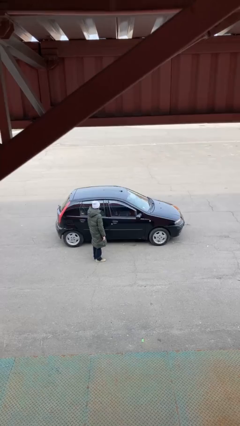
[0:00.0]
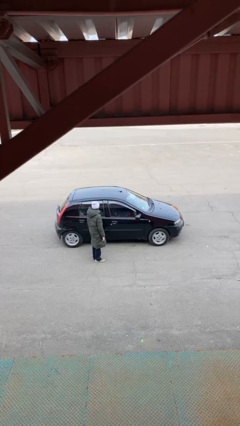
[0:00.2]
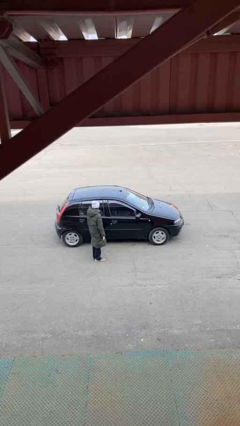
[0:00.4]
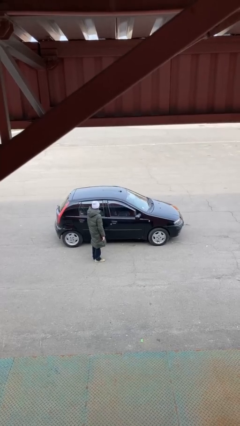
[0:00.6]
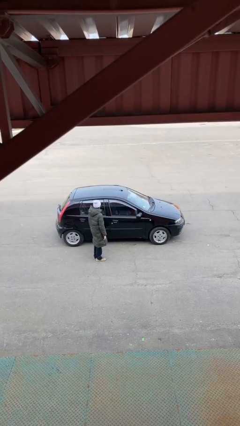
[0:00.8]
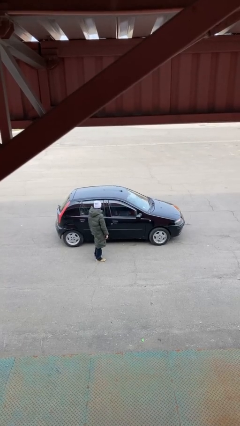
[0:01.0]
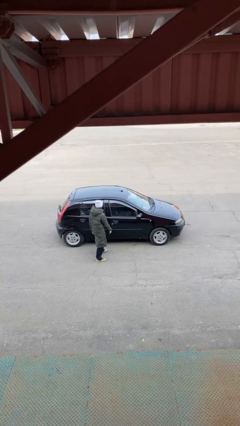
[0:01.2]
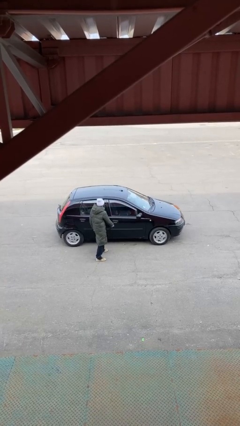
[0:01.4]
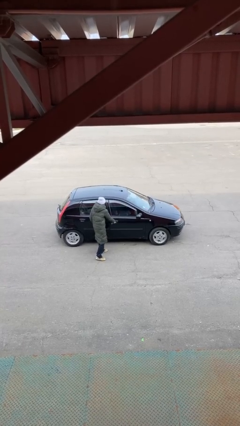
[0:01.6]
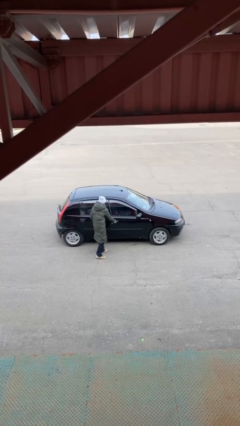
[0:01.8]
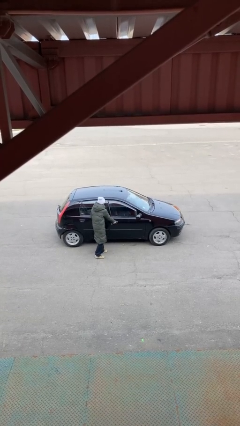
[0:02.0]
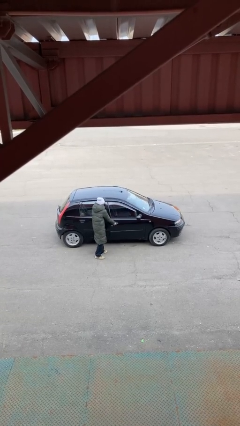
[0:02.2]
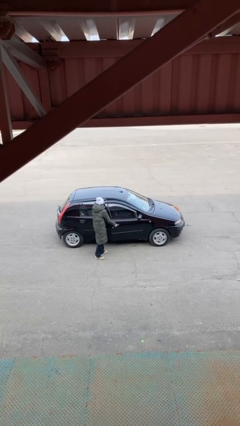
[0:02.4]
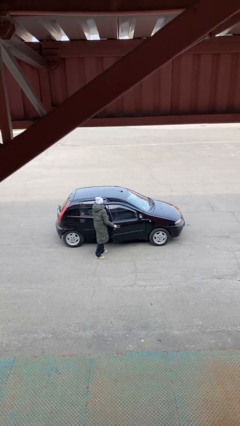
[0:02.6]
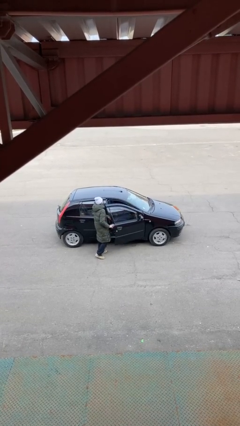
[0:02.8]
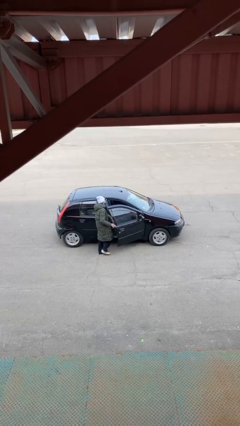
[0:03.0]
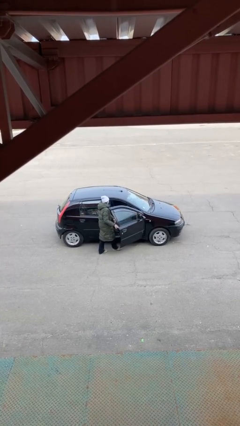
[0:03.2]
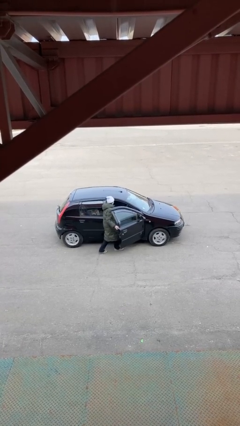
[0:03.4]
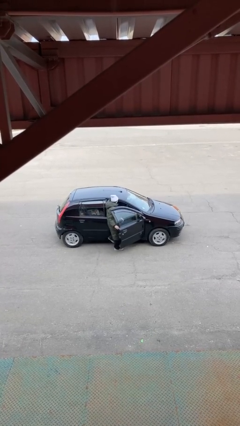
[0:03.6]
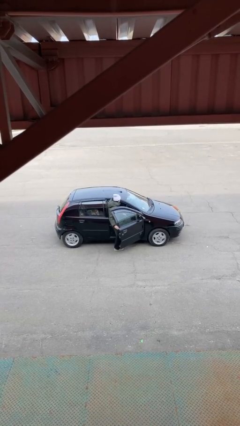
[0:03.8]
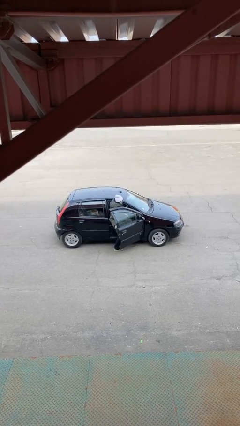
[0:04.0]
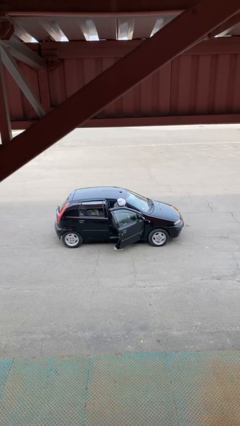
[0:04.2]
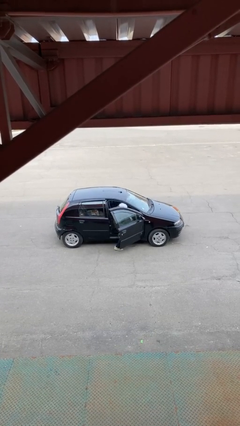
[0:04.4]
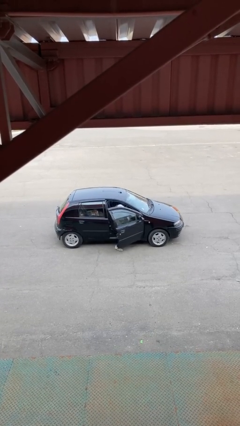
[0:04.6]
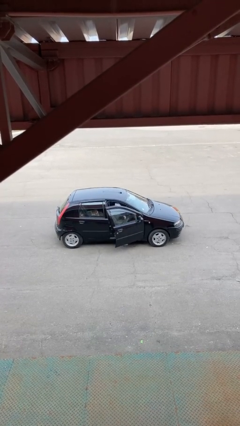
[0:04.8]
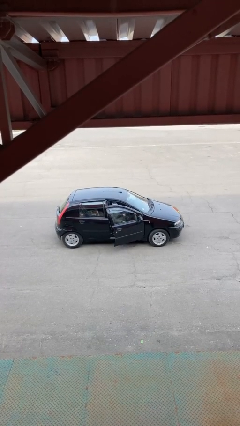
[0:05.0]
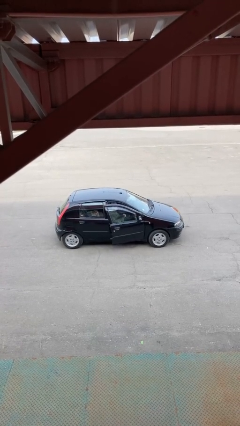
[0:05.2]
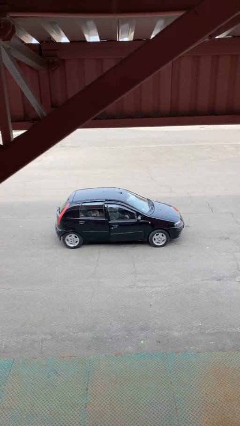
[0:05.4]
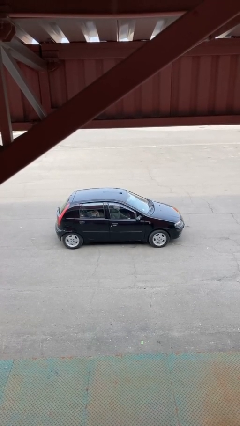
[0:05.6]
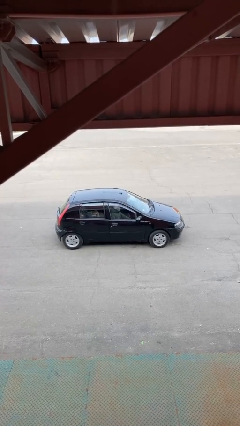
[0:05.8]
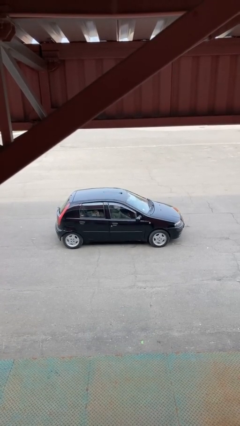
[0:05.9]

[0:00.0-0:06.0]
car picks up person

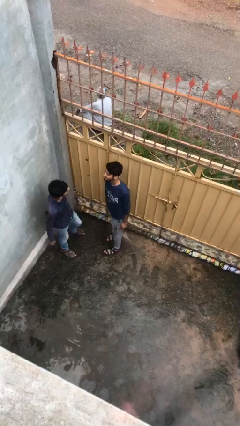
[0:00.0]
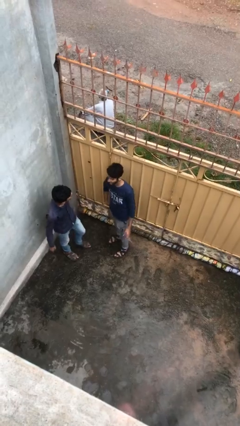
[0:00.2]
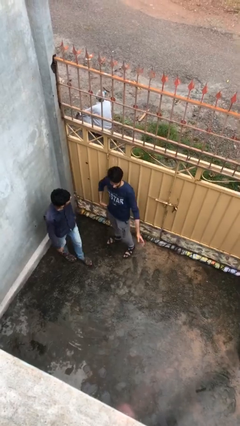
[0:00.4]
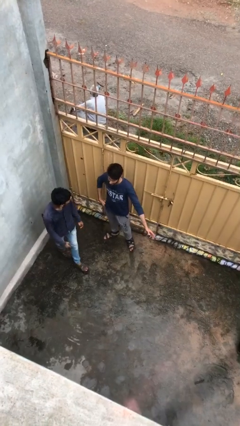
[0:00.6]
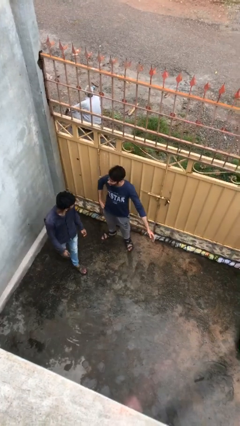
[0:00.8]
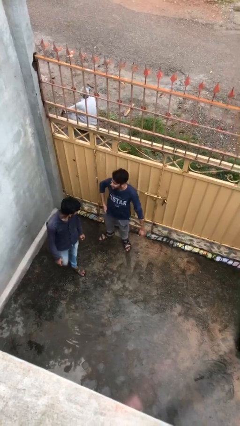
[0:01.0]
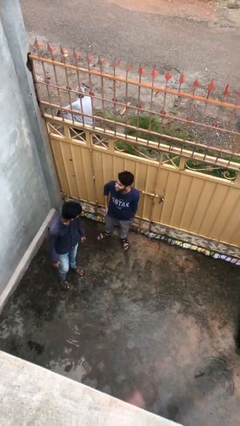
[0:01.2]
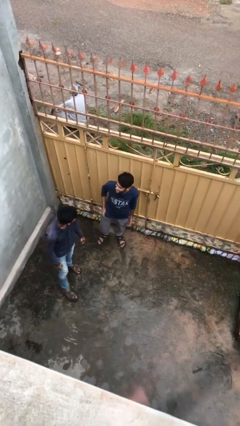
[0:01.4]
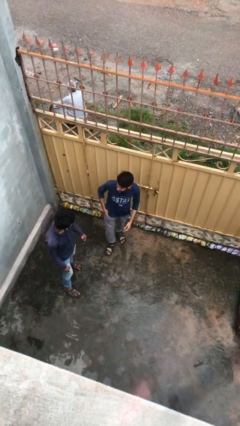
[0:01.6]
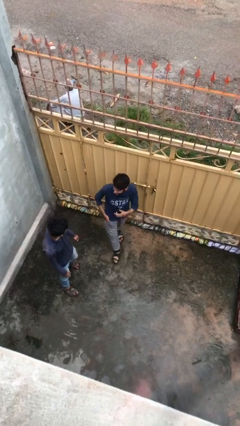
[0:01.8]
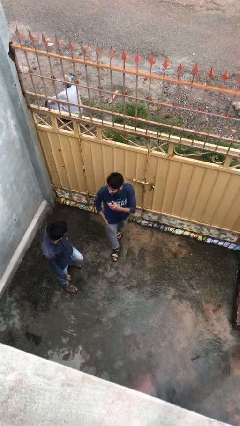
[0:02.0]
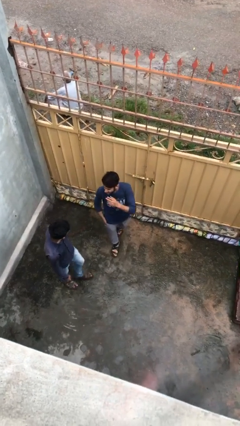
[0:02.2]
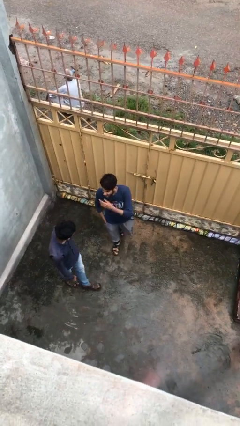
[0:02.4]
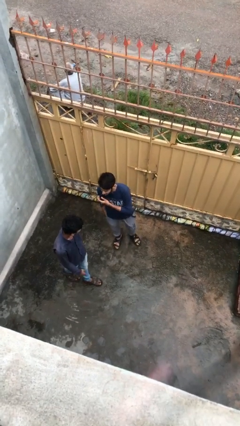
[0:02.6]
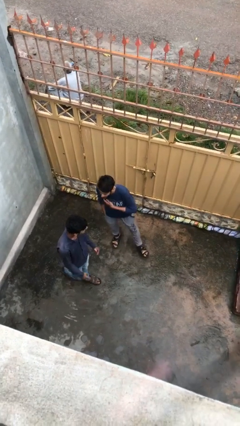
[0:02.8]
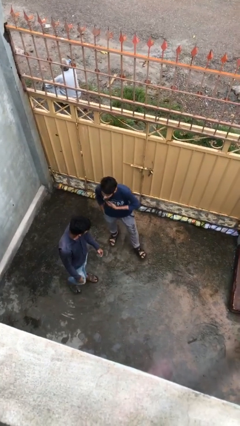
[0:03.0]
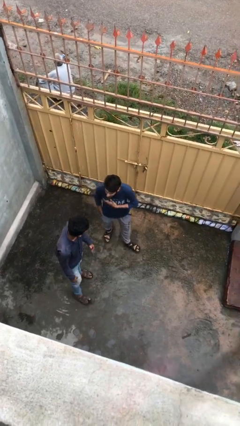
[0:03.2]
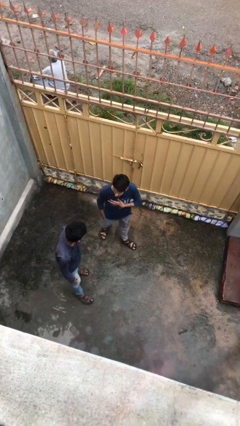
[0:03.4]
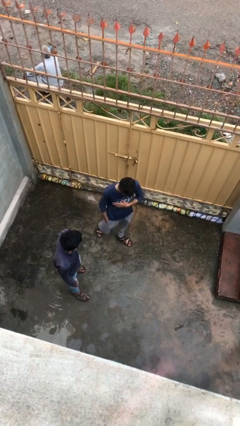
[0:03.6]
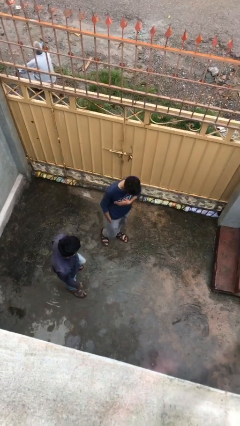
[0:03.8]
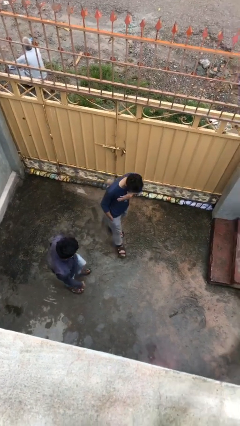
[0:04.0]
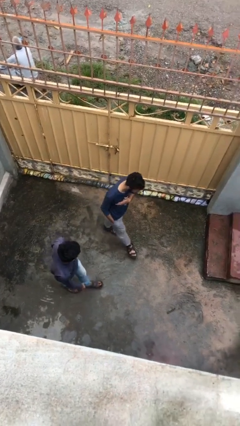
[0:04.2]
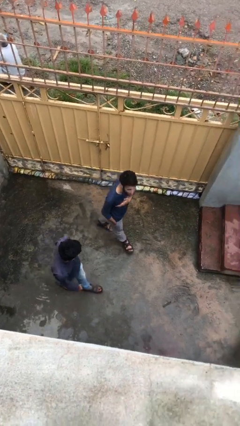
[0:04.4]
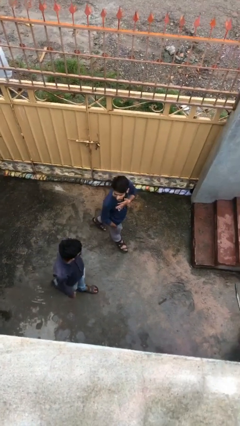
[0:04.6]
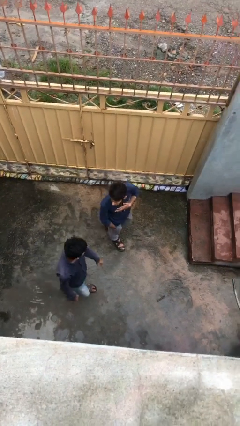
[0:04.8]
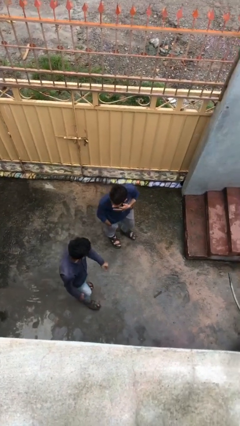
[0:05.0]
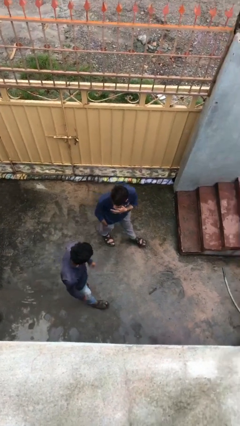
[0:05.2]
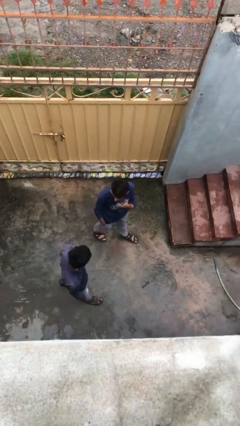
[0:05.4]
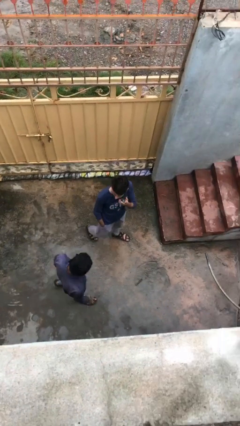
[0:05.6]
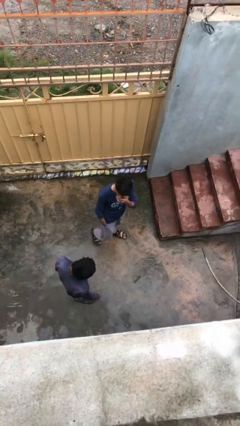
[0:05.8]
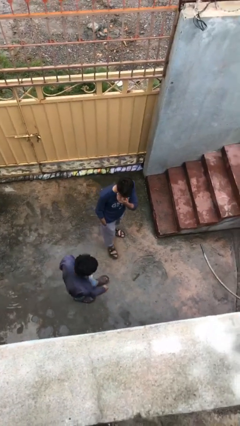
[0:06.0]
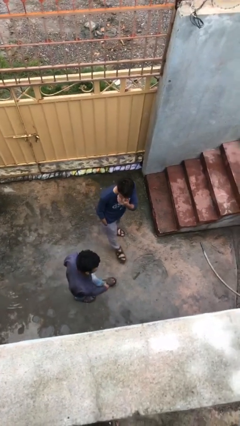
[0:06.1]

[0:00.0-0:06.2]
person talks to person

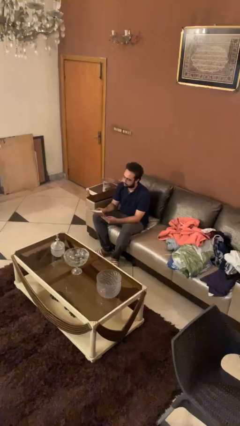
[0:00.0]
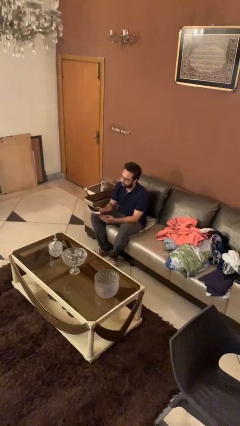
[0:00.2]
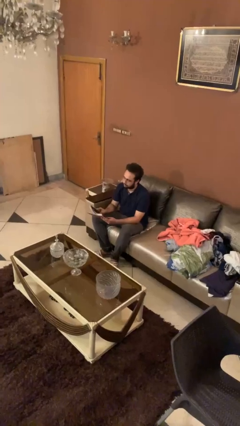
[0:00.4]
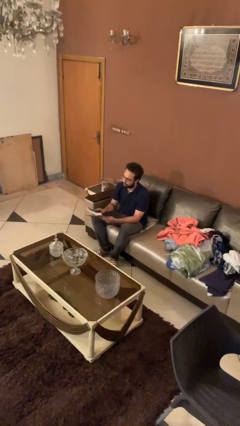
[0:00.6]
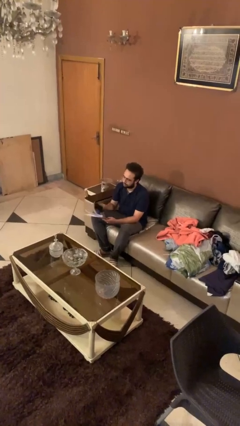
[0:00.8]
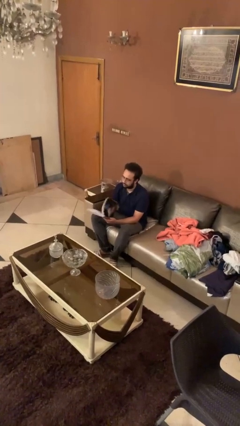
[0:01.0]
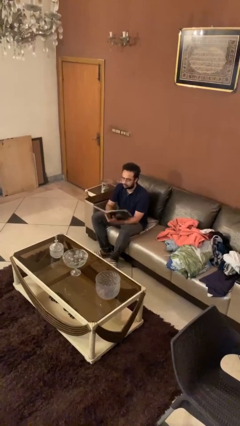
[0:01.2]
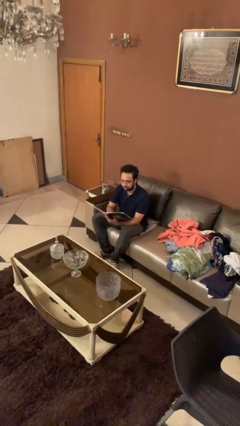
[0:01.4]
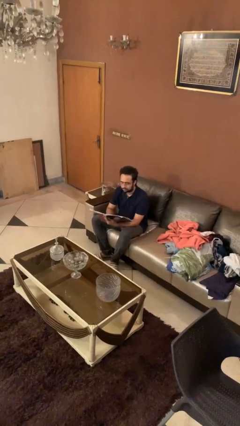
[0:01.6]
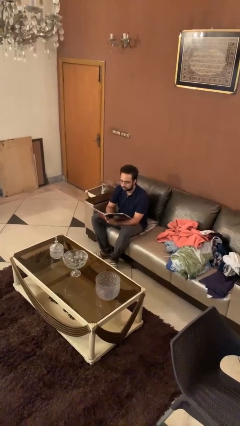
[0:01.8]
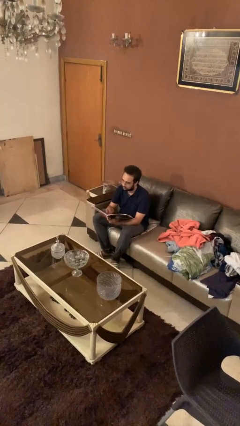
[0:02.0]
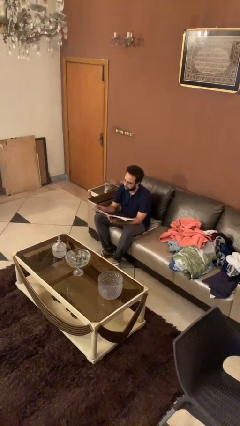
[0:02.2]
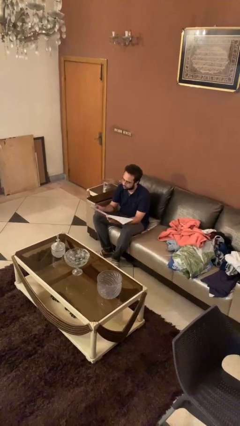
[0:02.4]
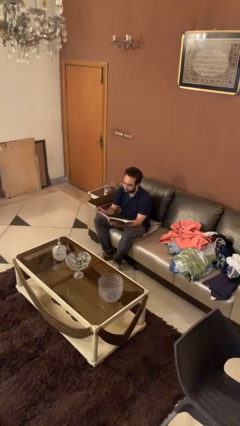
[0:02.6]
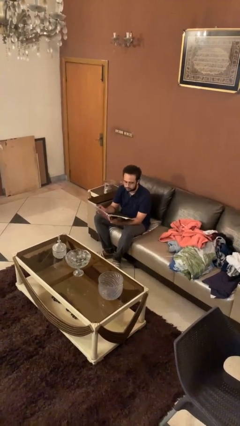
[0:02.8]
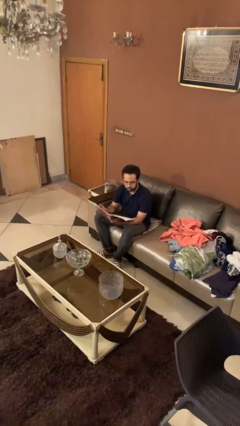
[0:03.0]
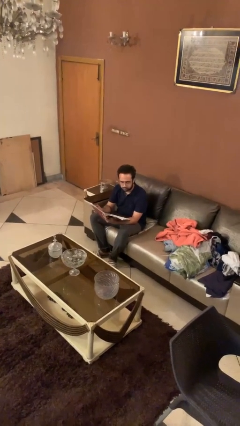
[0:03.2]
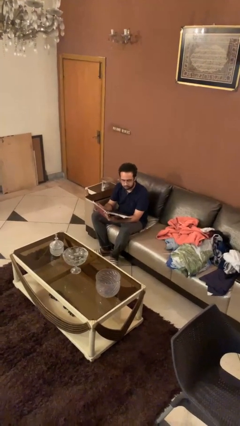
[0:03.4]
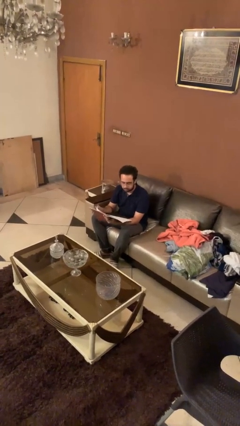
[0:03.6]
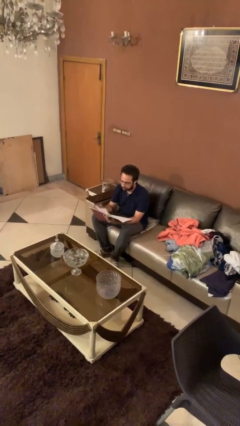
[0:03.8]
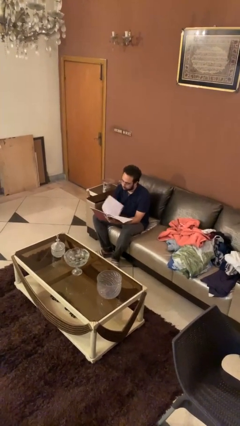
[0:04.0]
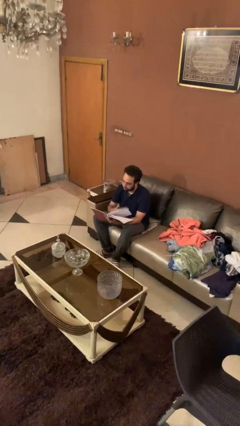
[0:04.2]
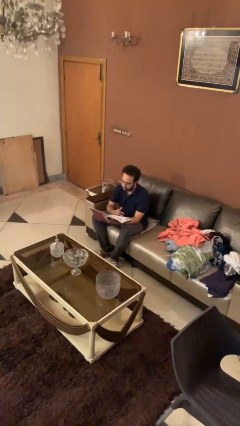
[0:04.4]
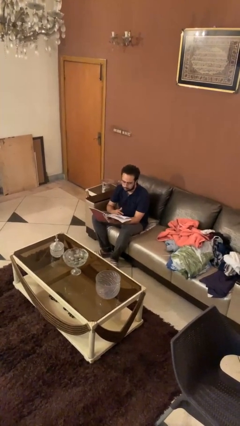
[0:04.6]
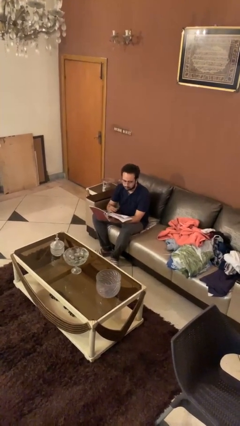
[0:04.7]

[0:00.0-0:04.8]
person reads document

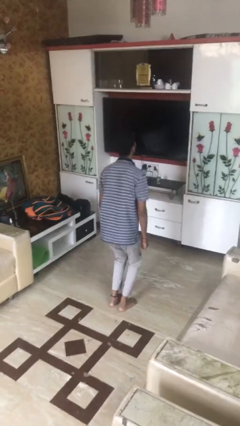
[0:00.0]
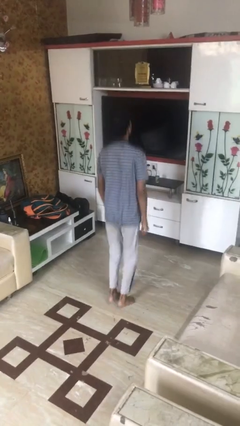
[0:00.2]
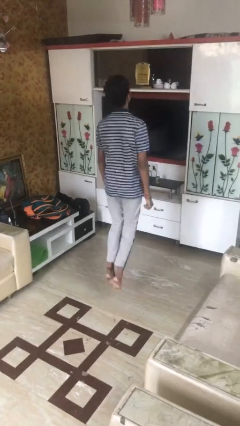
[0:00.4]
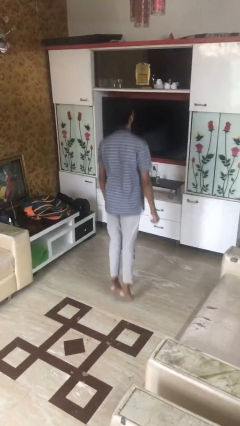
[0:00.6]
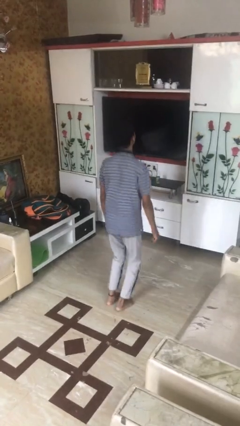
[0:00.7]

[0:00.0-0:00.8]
person jumps
